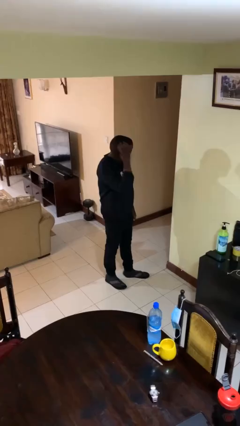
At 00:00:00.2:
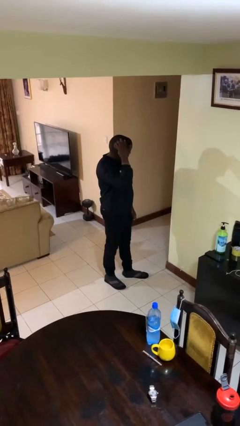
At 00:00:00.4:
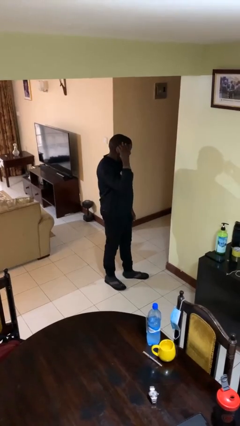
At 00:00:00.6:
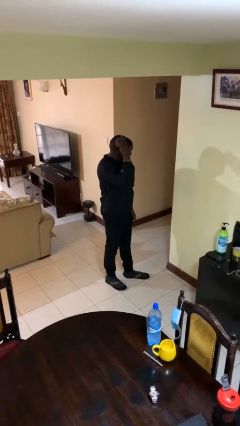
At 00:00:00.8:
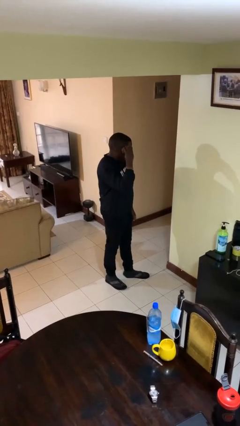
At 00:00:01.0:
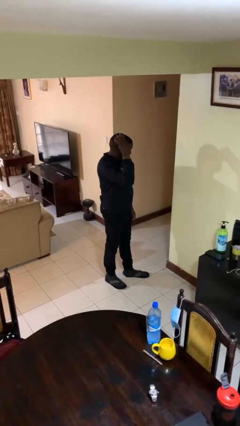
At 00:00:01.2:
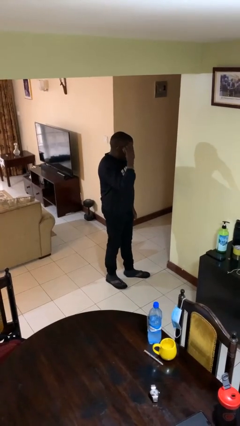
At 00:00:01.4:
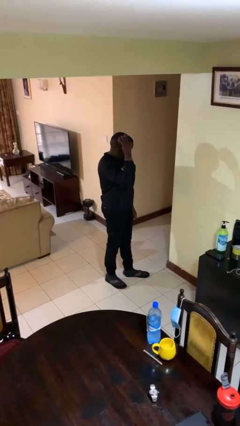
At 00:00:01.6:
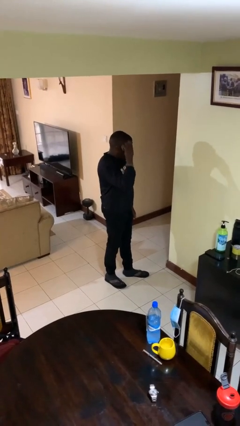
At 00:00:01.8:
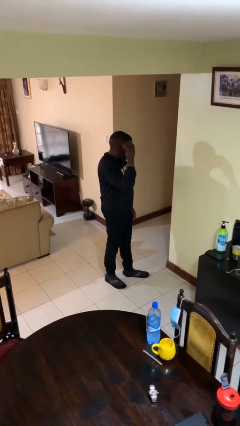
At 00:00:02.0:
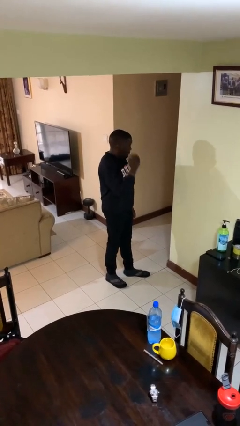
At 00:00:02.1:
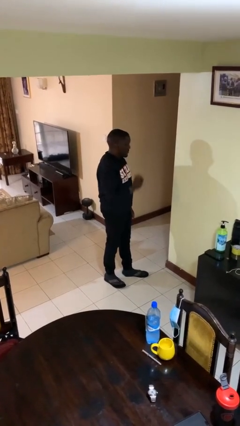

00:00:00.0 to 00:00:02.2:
person brushes hair

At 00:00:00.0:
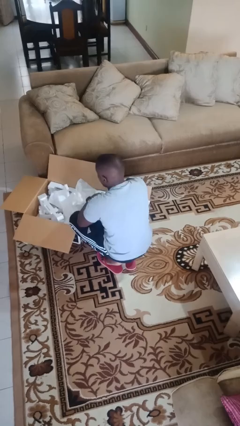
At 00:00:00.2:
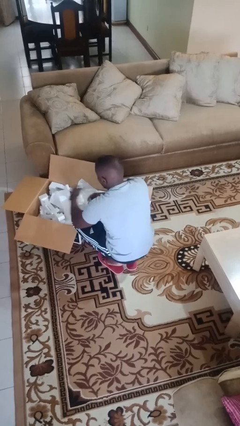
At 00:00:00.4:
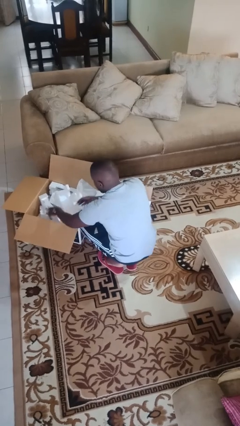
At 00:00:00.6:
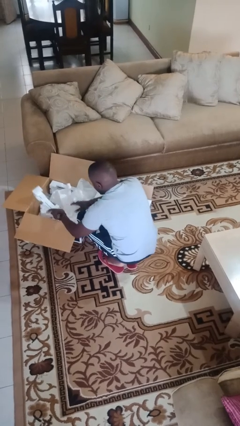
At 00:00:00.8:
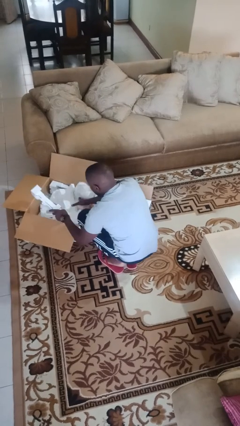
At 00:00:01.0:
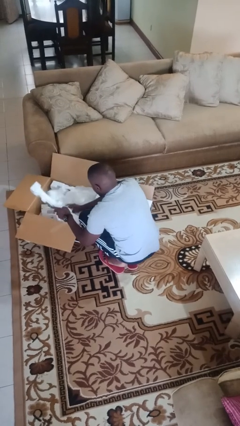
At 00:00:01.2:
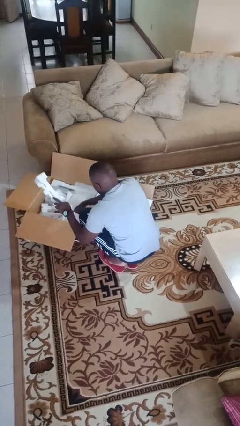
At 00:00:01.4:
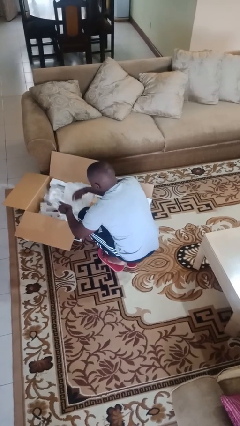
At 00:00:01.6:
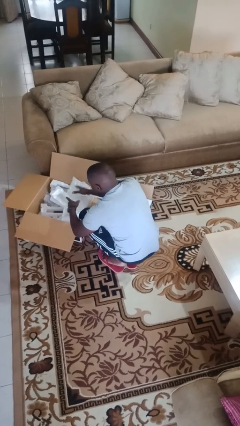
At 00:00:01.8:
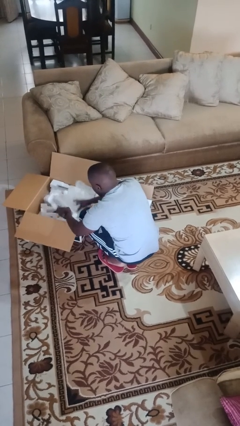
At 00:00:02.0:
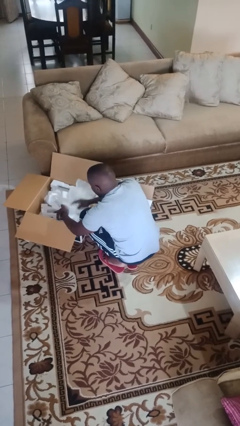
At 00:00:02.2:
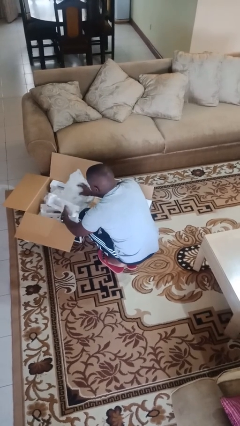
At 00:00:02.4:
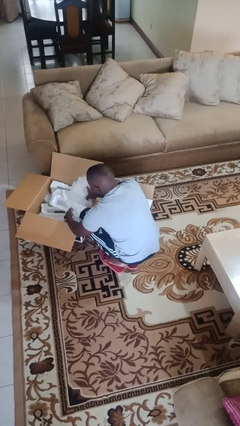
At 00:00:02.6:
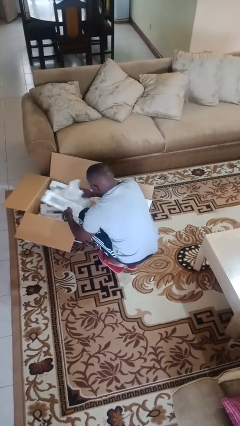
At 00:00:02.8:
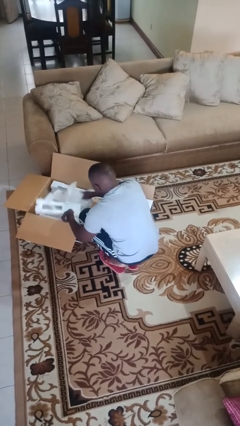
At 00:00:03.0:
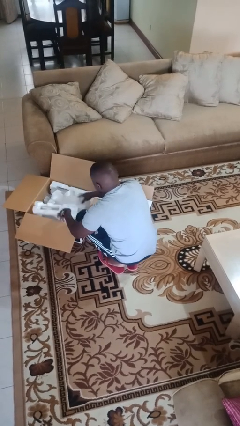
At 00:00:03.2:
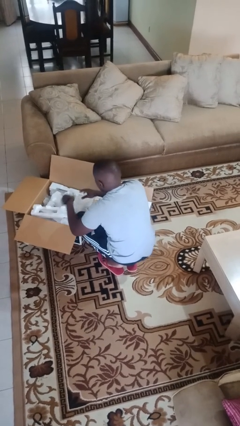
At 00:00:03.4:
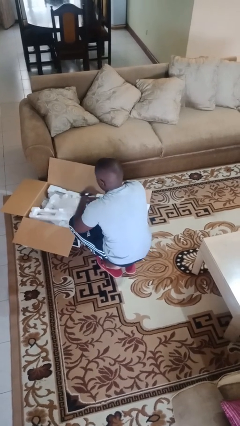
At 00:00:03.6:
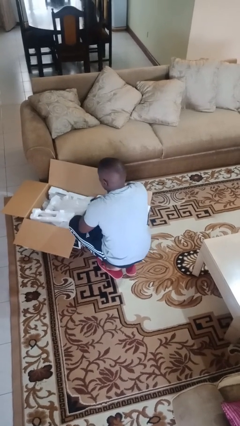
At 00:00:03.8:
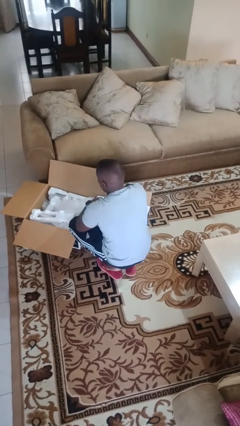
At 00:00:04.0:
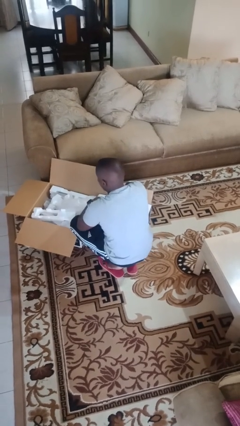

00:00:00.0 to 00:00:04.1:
person searches in box

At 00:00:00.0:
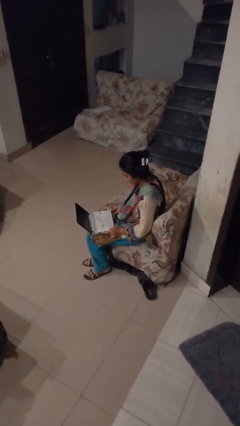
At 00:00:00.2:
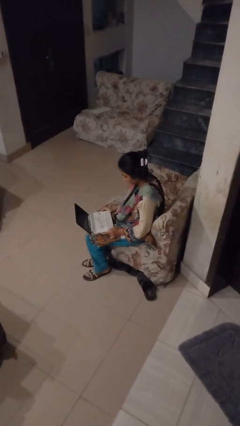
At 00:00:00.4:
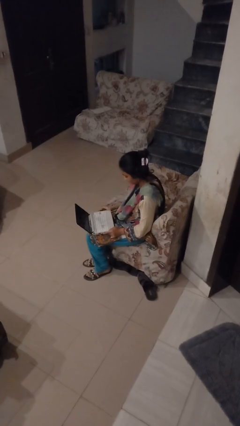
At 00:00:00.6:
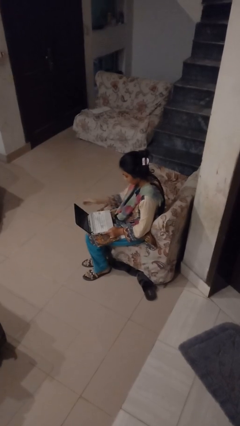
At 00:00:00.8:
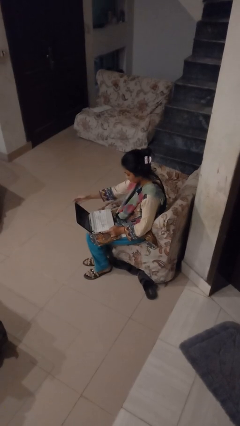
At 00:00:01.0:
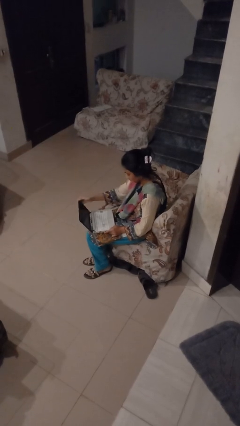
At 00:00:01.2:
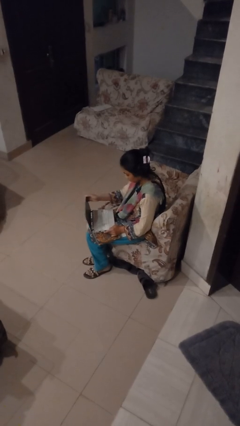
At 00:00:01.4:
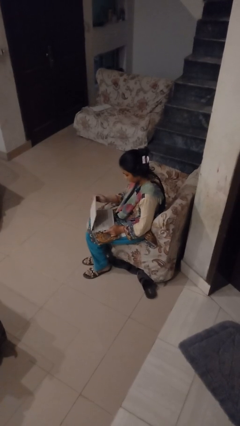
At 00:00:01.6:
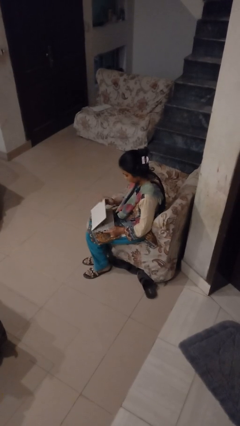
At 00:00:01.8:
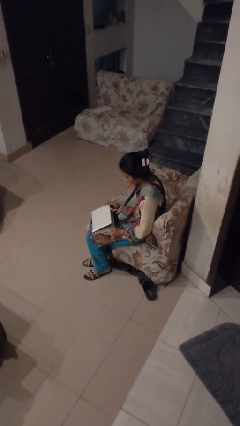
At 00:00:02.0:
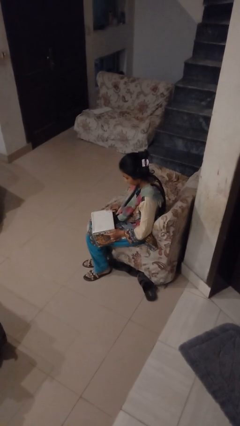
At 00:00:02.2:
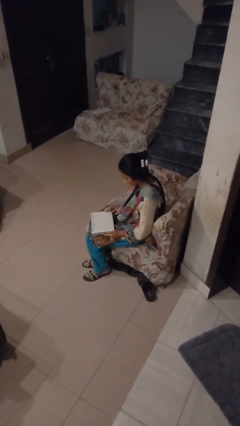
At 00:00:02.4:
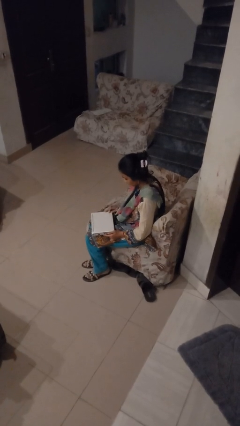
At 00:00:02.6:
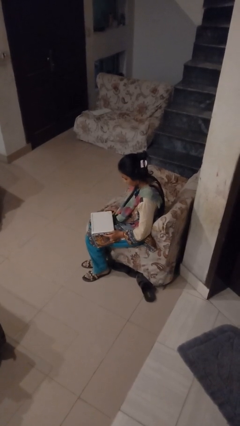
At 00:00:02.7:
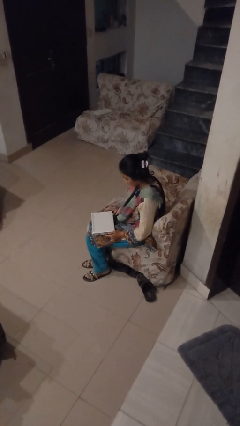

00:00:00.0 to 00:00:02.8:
person closes laptop

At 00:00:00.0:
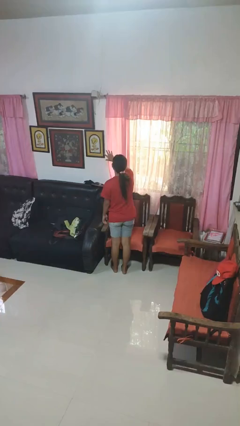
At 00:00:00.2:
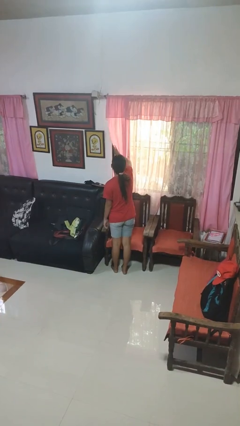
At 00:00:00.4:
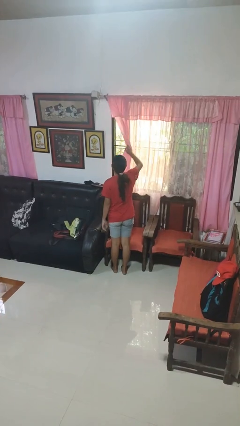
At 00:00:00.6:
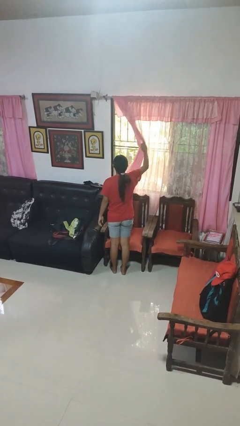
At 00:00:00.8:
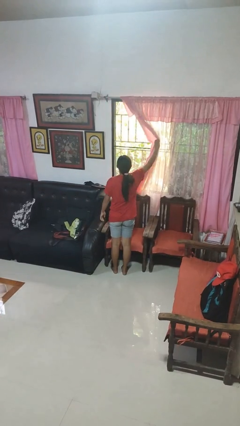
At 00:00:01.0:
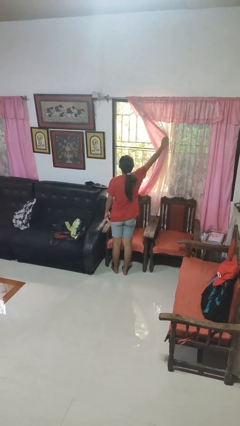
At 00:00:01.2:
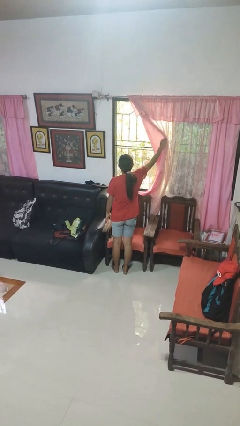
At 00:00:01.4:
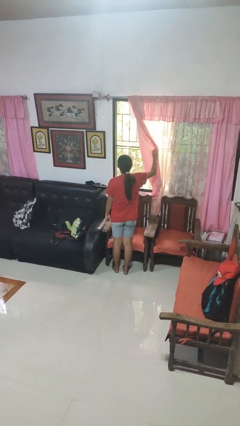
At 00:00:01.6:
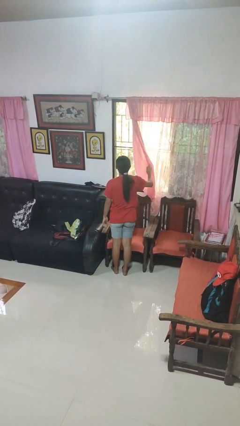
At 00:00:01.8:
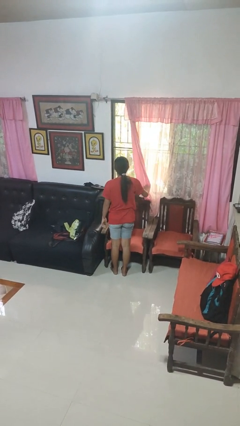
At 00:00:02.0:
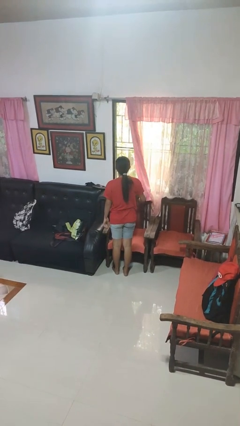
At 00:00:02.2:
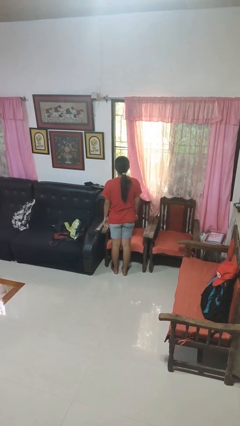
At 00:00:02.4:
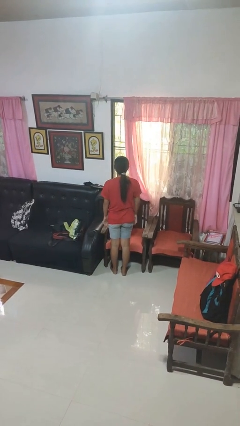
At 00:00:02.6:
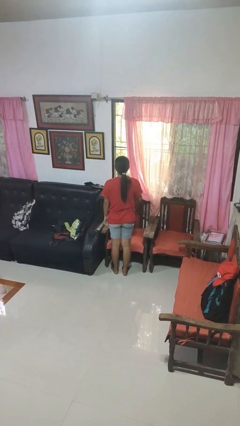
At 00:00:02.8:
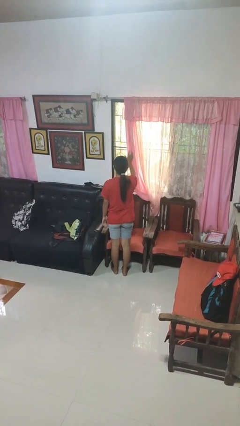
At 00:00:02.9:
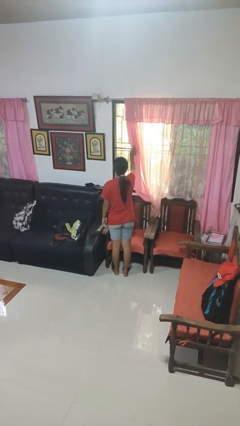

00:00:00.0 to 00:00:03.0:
person opens curtains

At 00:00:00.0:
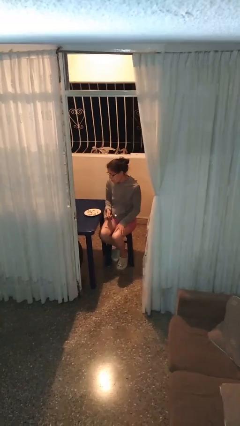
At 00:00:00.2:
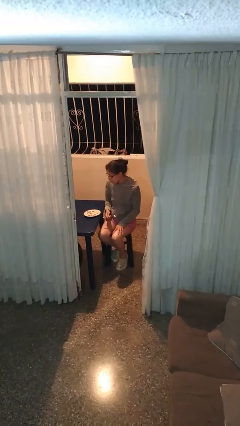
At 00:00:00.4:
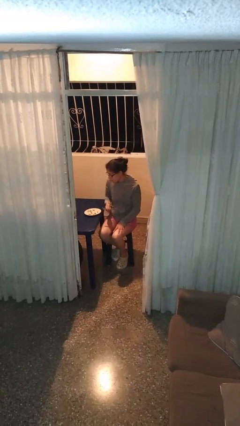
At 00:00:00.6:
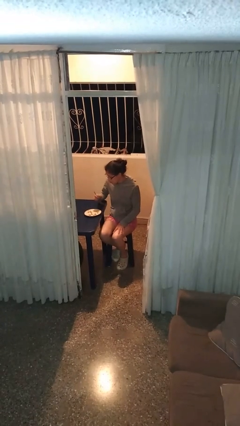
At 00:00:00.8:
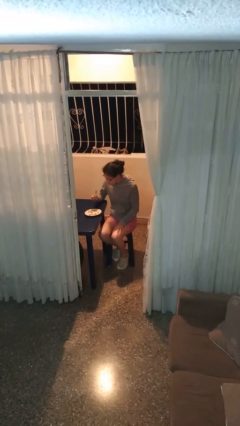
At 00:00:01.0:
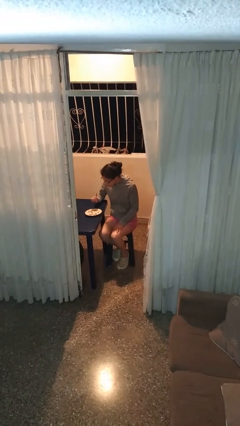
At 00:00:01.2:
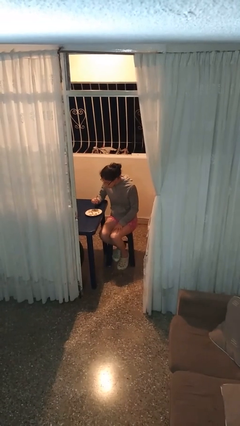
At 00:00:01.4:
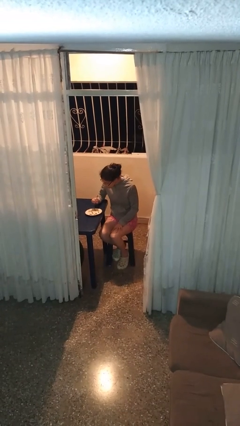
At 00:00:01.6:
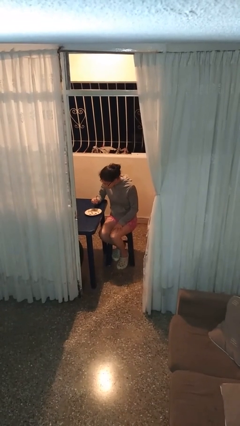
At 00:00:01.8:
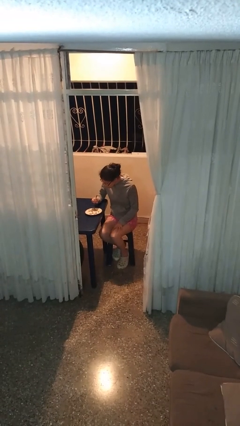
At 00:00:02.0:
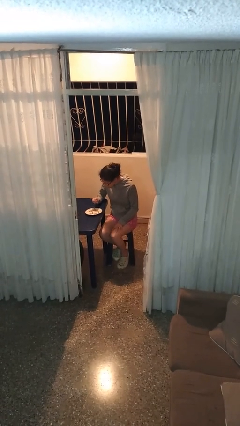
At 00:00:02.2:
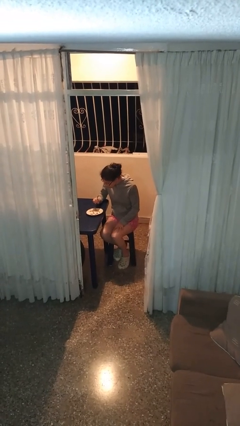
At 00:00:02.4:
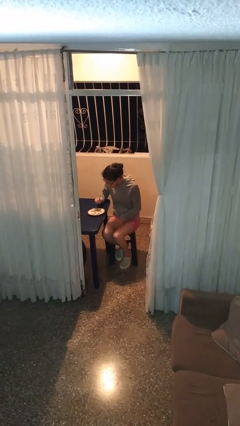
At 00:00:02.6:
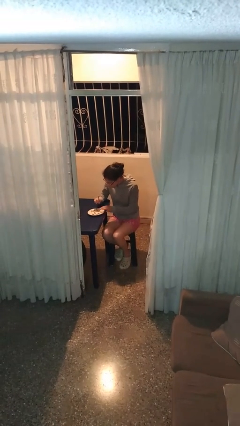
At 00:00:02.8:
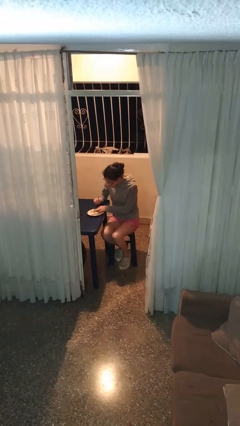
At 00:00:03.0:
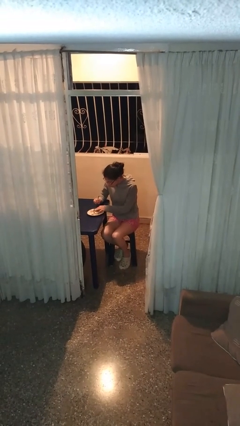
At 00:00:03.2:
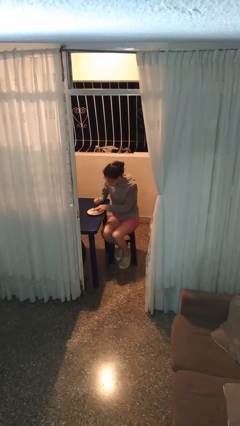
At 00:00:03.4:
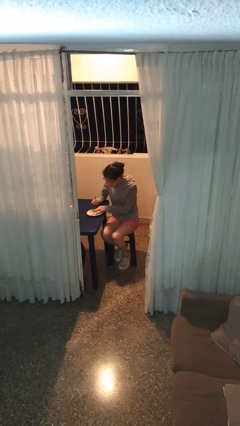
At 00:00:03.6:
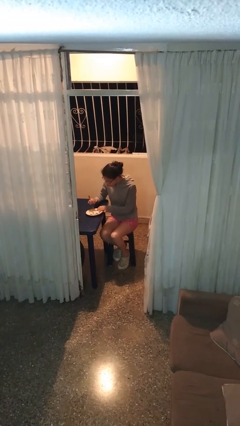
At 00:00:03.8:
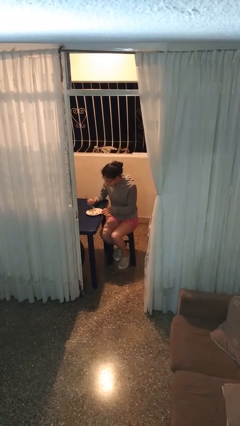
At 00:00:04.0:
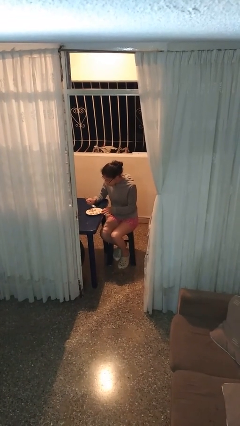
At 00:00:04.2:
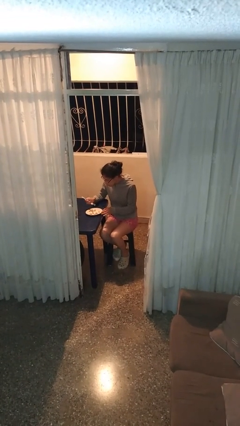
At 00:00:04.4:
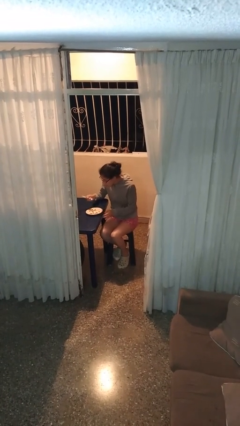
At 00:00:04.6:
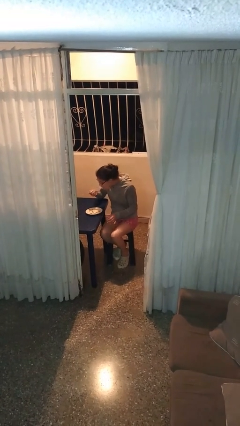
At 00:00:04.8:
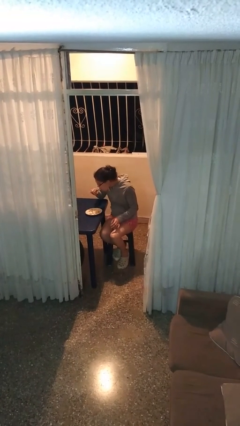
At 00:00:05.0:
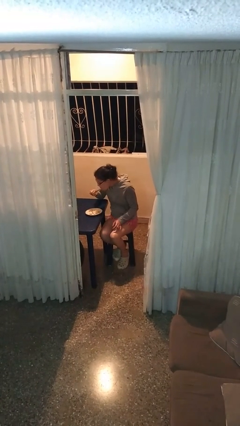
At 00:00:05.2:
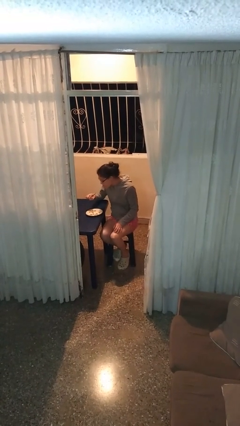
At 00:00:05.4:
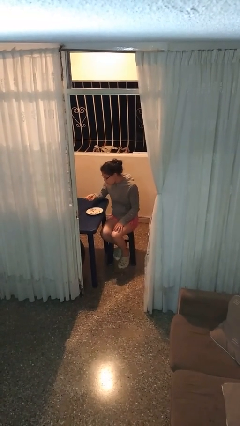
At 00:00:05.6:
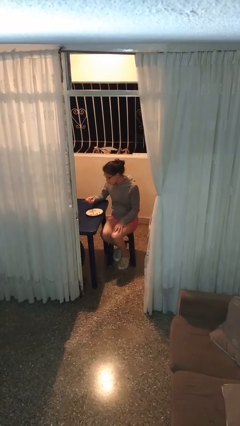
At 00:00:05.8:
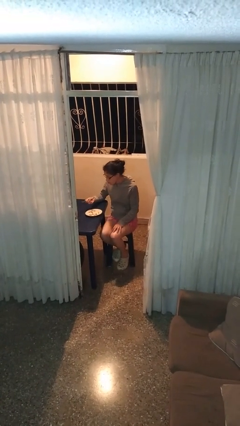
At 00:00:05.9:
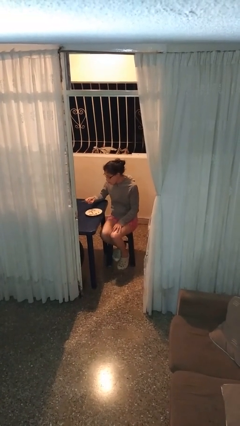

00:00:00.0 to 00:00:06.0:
person eats with utensil
